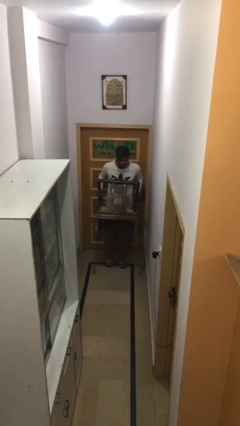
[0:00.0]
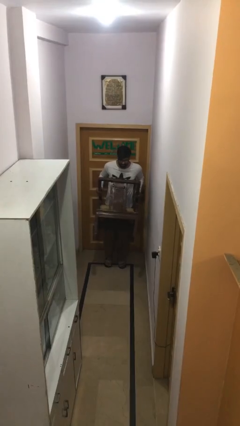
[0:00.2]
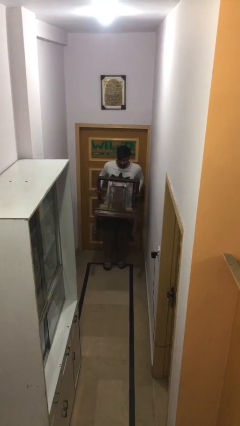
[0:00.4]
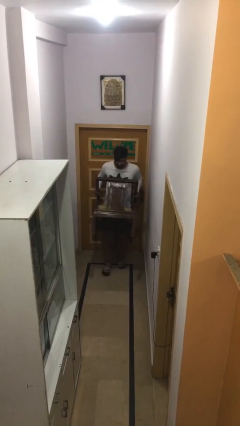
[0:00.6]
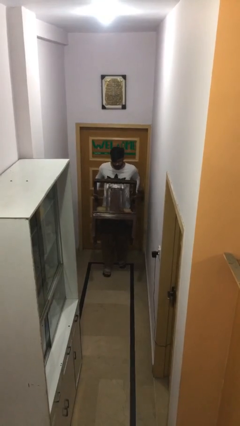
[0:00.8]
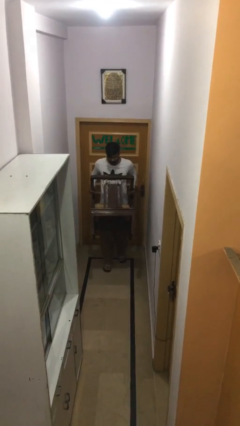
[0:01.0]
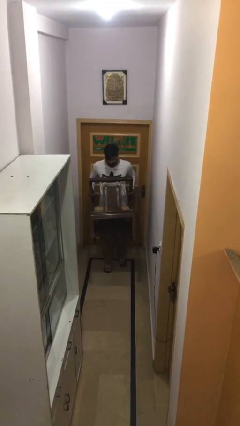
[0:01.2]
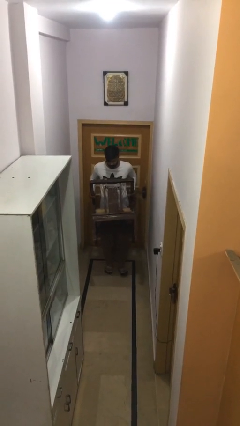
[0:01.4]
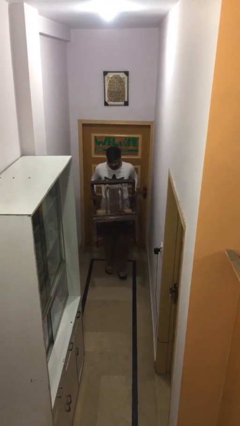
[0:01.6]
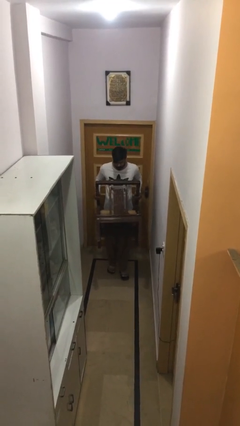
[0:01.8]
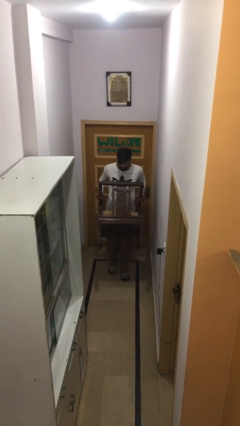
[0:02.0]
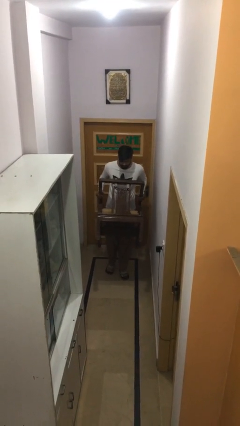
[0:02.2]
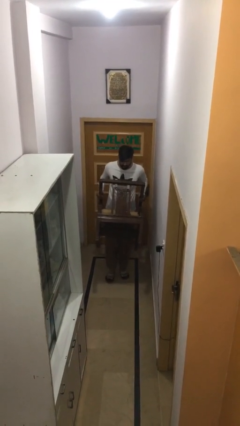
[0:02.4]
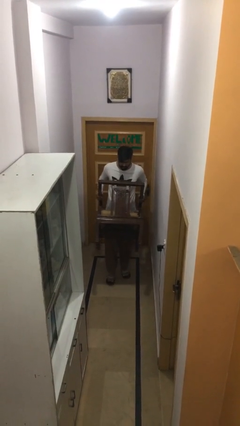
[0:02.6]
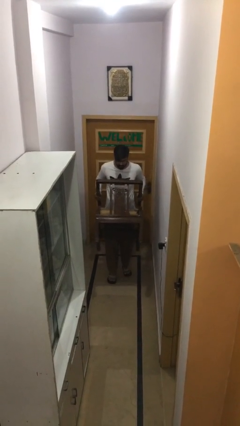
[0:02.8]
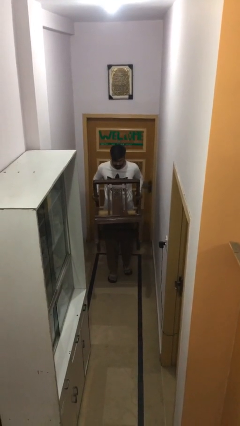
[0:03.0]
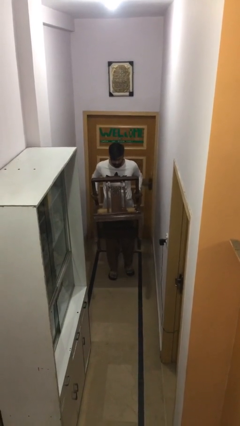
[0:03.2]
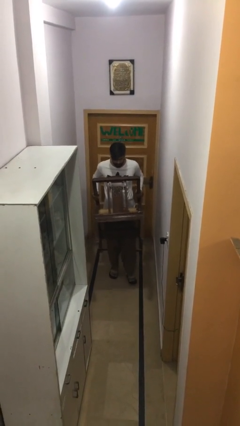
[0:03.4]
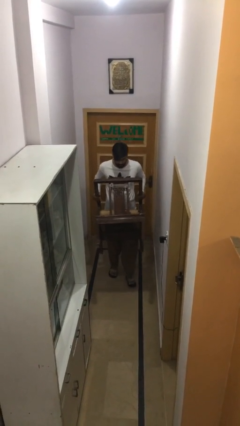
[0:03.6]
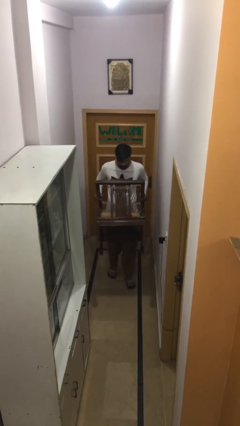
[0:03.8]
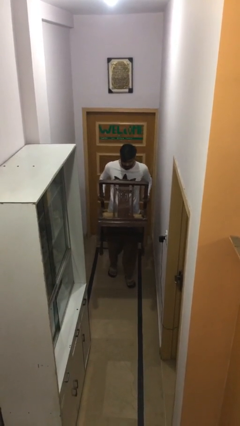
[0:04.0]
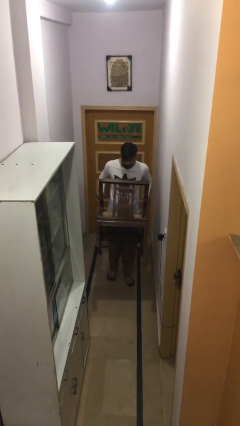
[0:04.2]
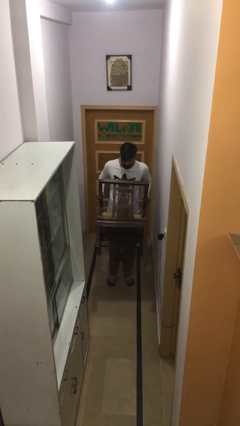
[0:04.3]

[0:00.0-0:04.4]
person carries heavy object

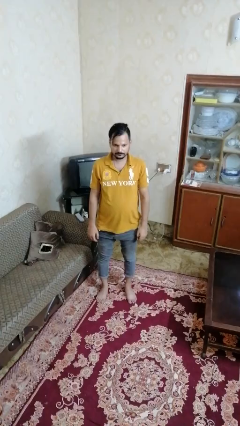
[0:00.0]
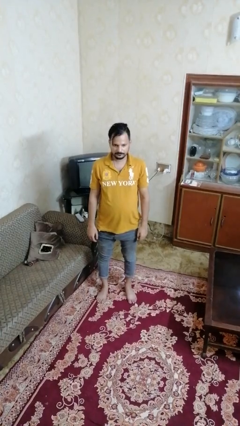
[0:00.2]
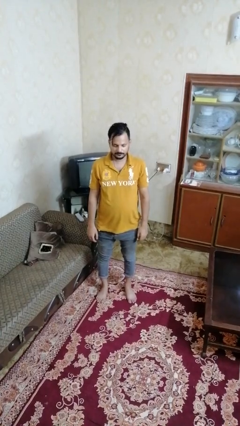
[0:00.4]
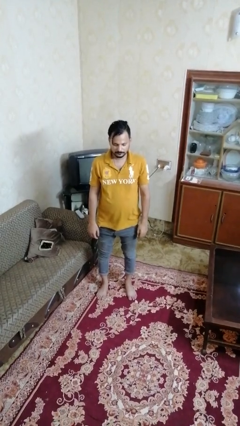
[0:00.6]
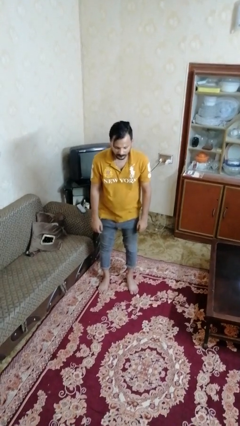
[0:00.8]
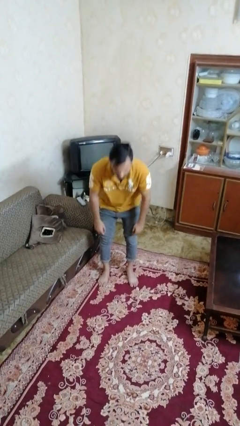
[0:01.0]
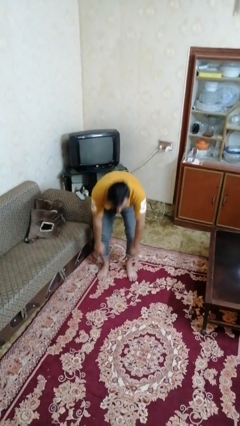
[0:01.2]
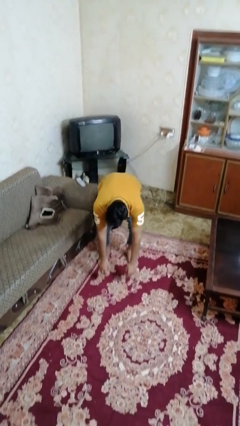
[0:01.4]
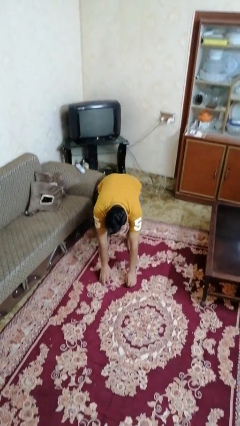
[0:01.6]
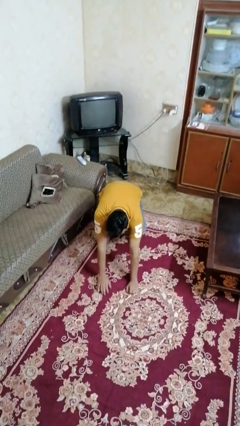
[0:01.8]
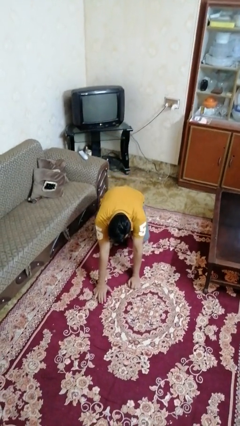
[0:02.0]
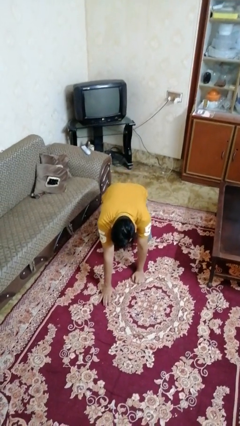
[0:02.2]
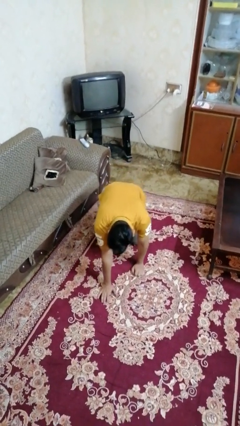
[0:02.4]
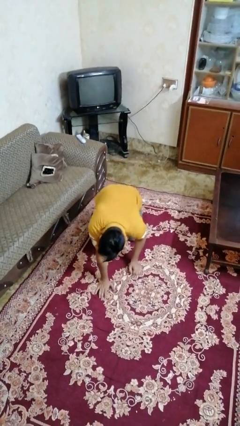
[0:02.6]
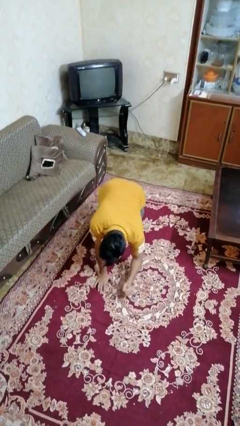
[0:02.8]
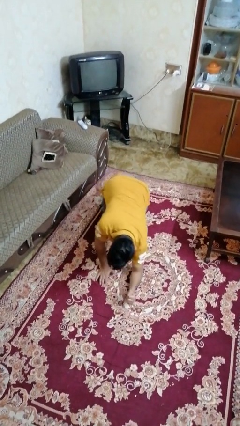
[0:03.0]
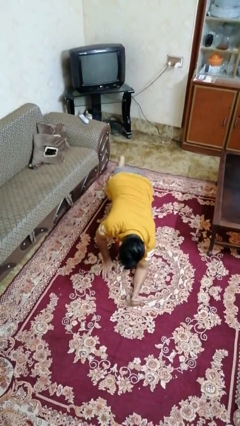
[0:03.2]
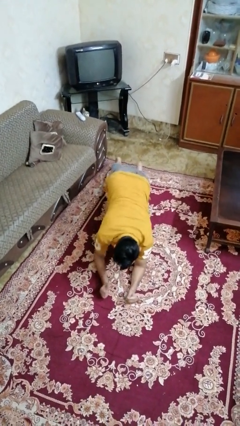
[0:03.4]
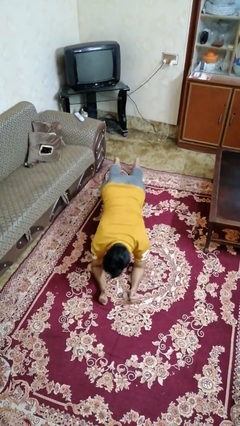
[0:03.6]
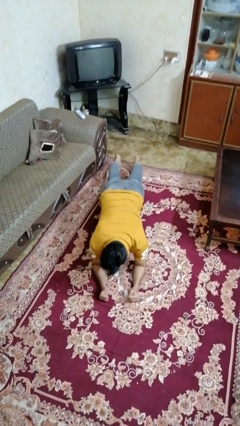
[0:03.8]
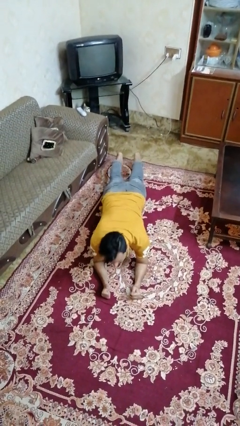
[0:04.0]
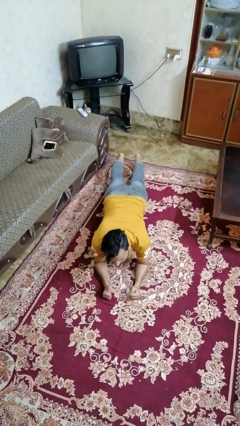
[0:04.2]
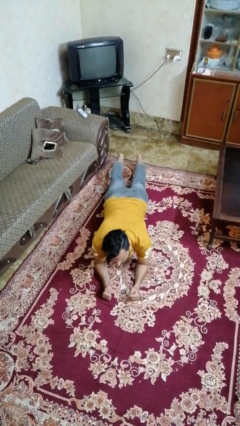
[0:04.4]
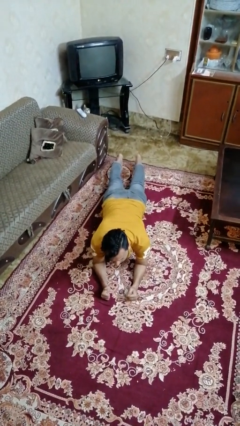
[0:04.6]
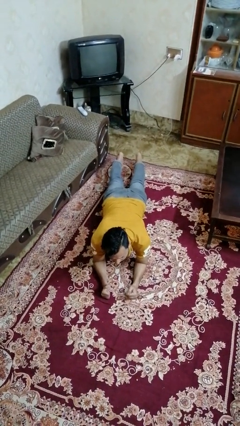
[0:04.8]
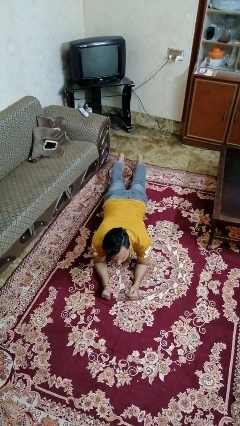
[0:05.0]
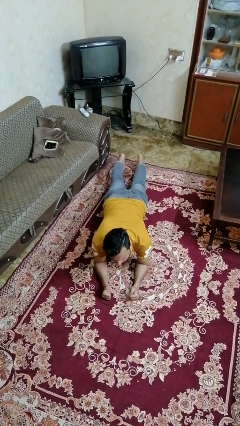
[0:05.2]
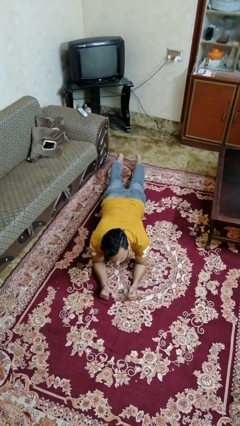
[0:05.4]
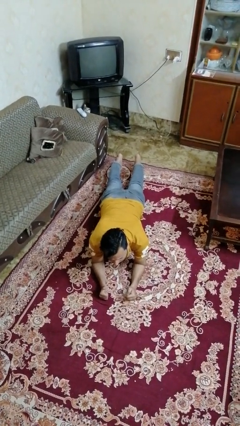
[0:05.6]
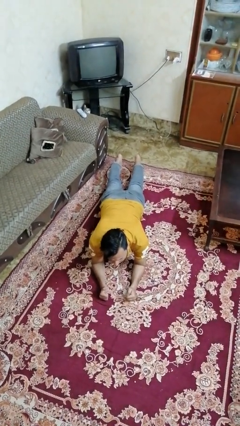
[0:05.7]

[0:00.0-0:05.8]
person exercises with plank

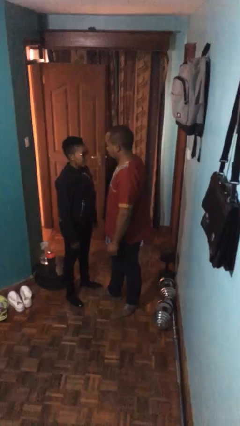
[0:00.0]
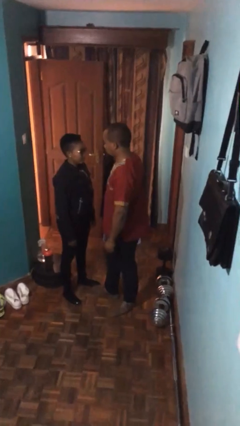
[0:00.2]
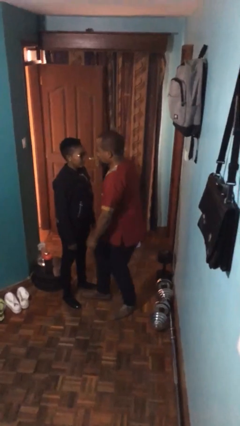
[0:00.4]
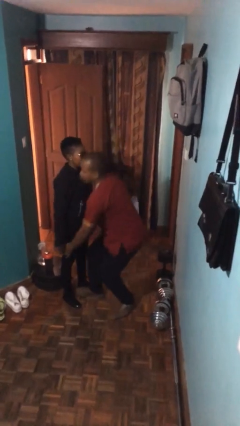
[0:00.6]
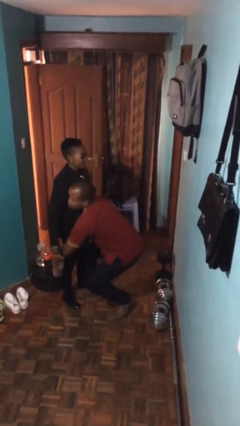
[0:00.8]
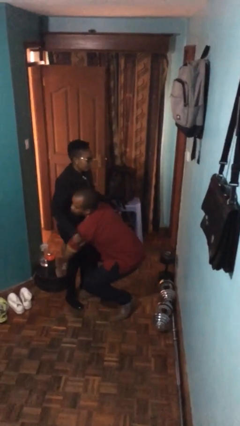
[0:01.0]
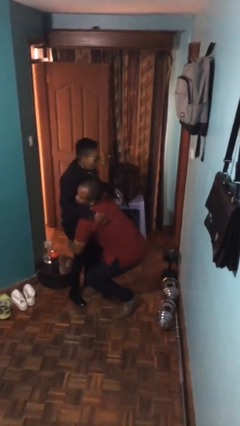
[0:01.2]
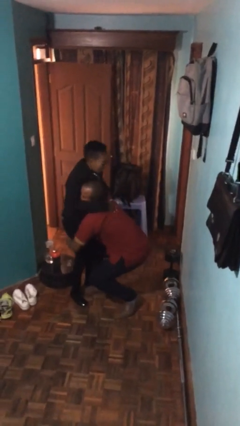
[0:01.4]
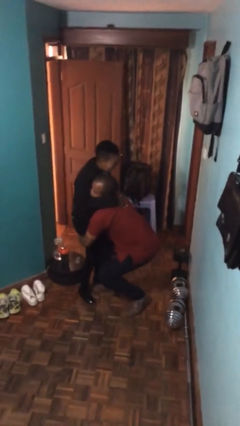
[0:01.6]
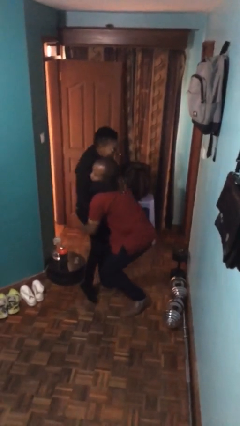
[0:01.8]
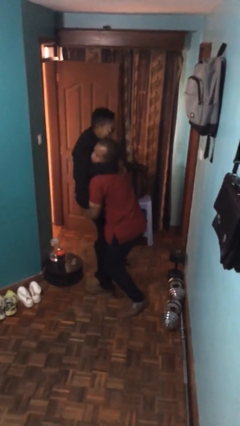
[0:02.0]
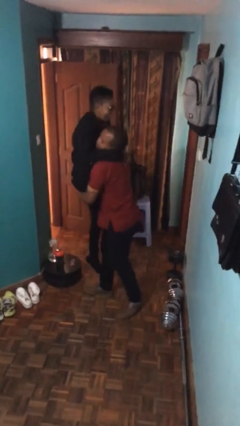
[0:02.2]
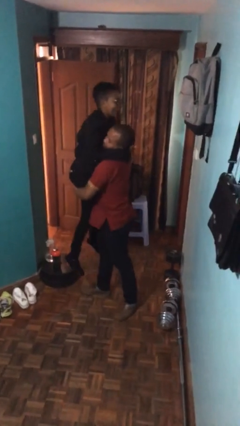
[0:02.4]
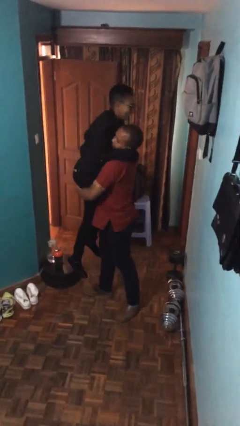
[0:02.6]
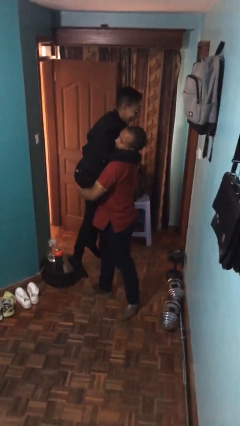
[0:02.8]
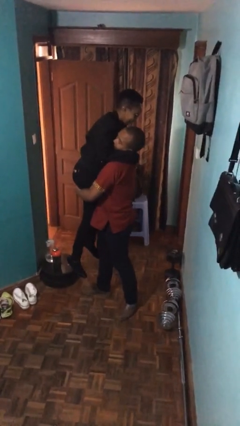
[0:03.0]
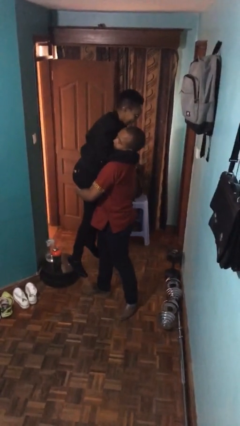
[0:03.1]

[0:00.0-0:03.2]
person picks up person

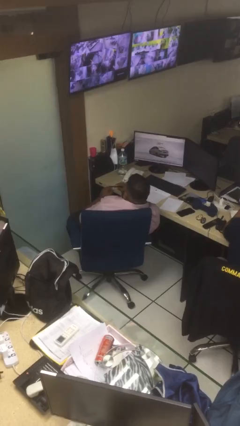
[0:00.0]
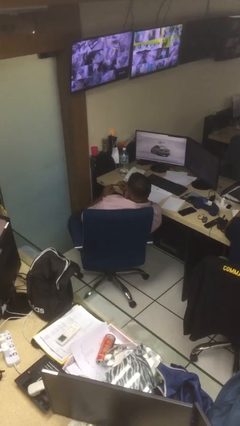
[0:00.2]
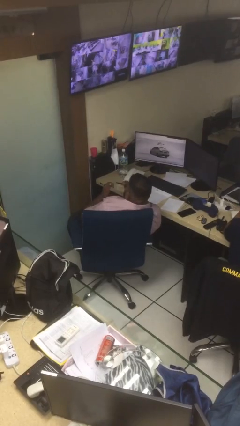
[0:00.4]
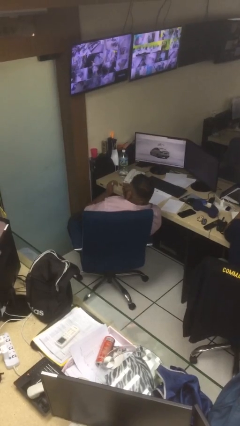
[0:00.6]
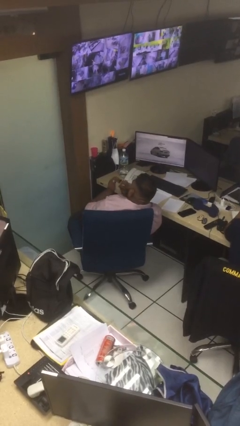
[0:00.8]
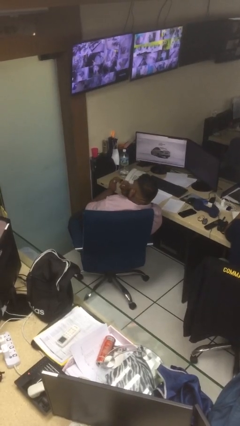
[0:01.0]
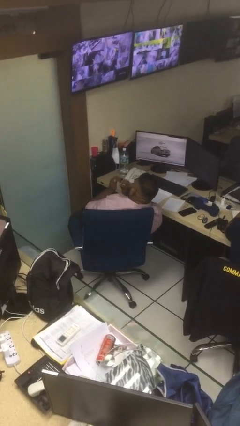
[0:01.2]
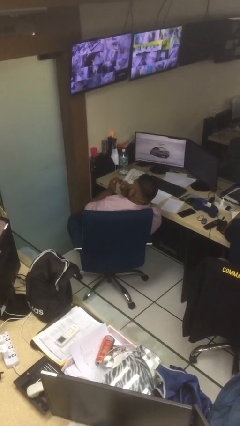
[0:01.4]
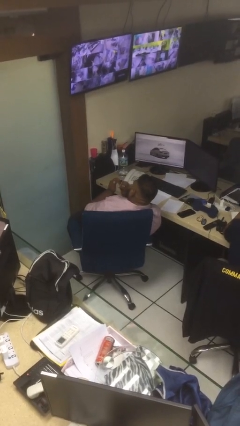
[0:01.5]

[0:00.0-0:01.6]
person files fingernails

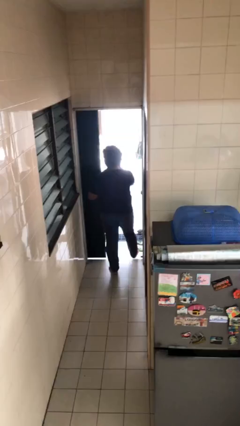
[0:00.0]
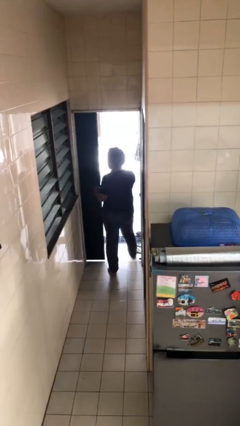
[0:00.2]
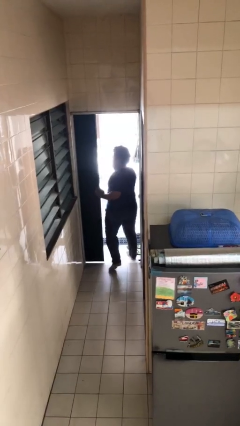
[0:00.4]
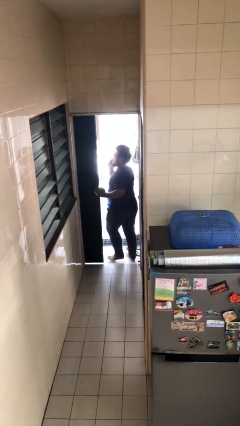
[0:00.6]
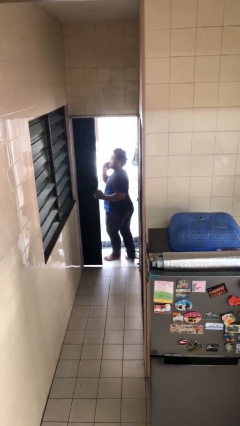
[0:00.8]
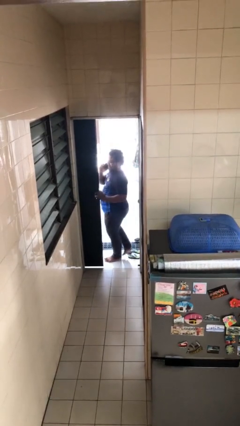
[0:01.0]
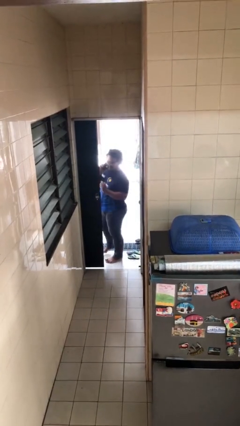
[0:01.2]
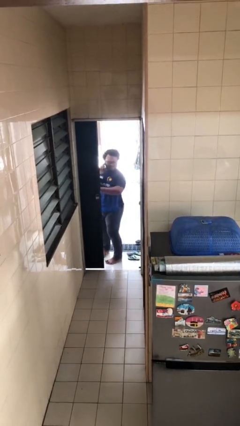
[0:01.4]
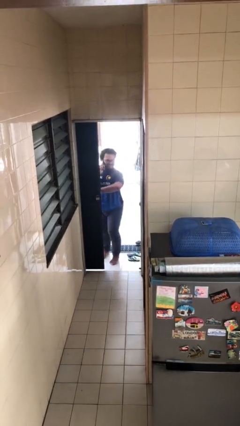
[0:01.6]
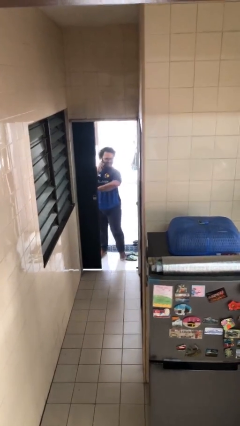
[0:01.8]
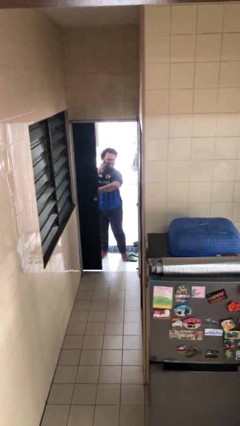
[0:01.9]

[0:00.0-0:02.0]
person exits scene through structure

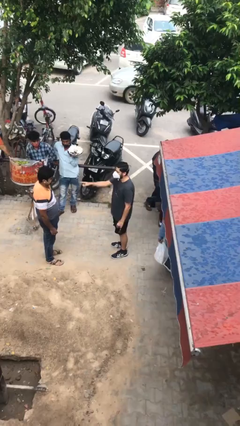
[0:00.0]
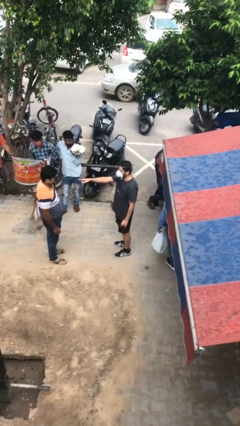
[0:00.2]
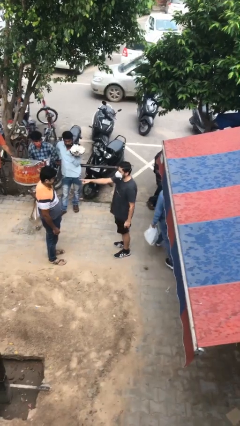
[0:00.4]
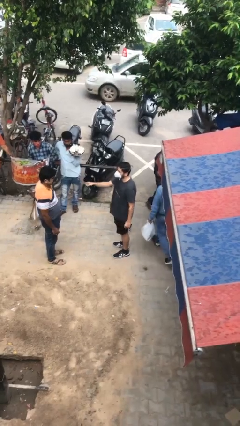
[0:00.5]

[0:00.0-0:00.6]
person points at person

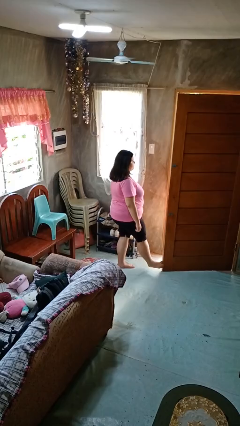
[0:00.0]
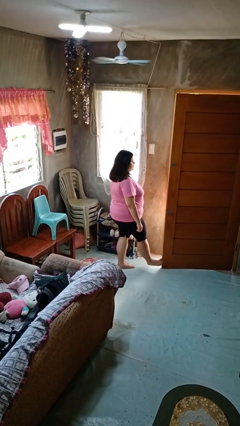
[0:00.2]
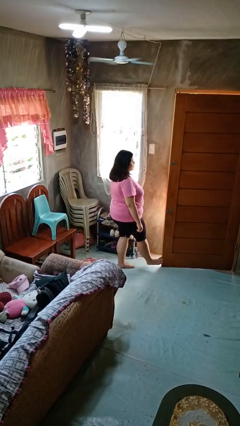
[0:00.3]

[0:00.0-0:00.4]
person closes door with foot
